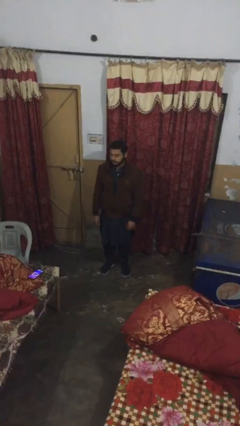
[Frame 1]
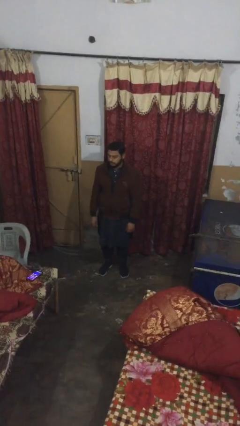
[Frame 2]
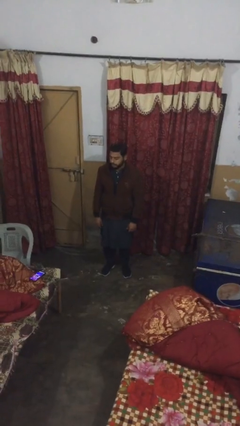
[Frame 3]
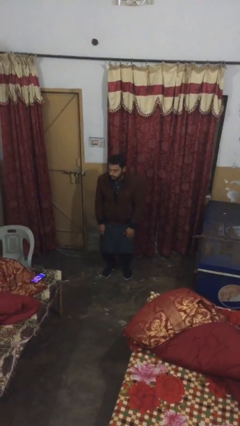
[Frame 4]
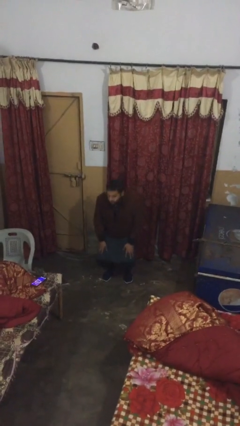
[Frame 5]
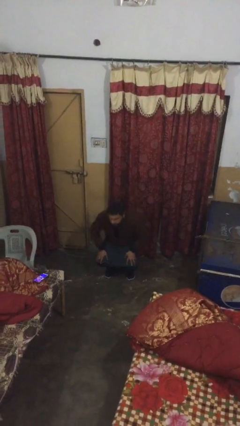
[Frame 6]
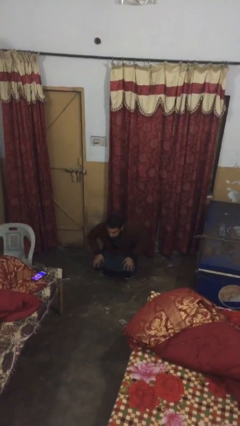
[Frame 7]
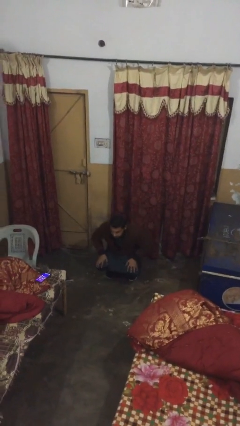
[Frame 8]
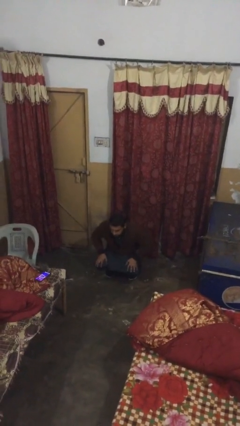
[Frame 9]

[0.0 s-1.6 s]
person sits down

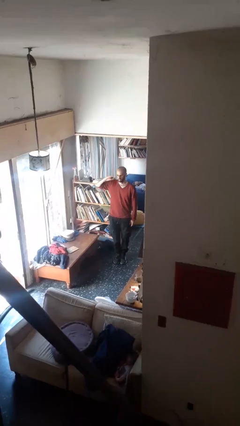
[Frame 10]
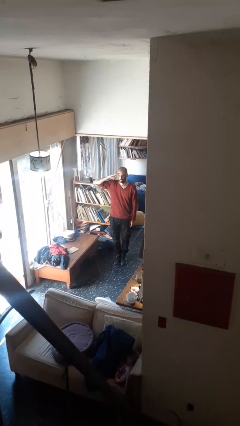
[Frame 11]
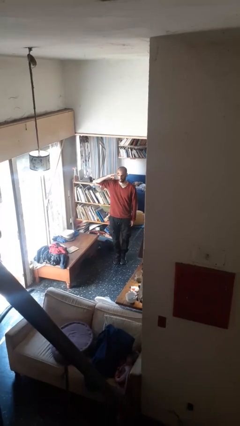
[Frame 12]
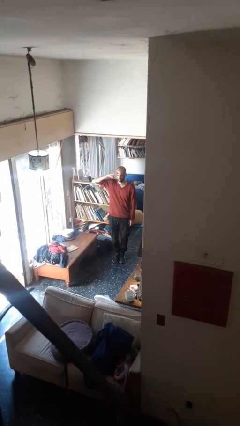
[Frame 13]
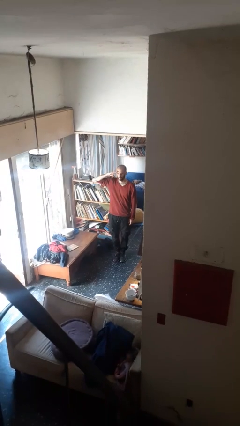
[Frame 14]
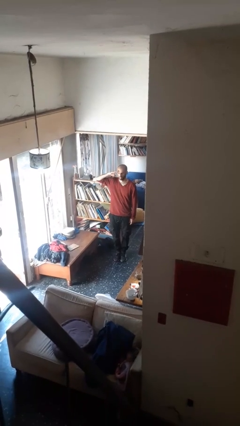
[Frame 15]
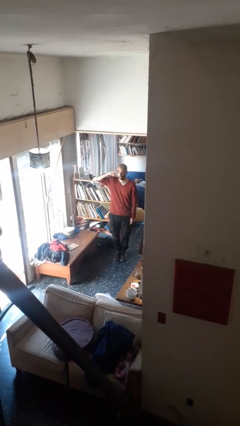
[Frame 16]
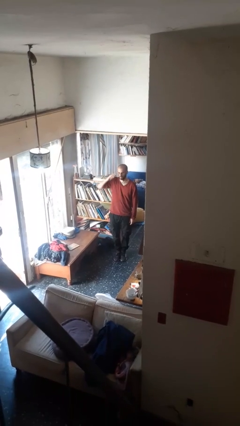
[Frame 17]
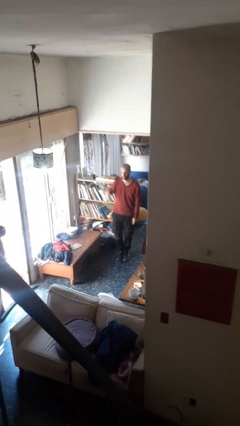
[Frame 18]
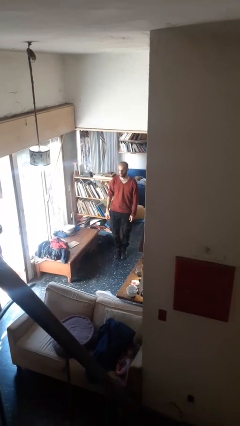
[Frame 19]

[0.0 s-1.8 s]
person salutes

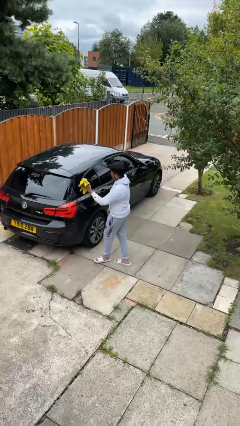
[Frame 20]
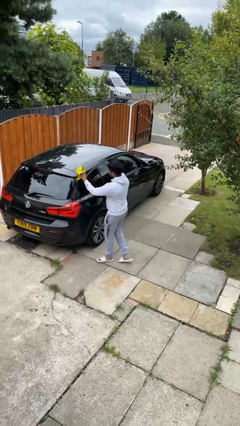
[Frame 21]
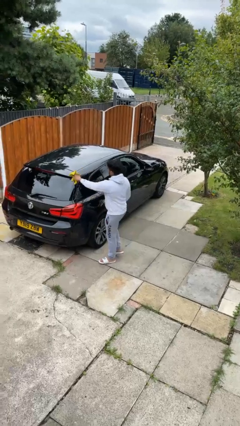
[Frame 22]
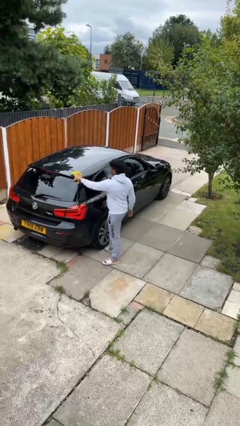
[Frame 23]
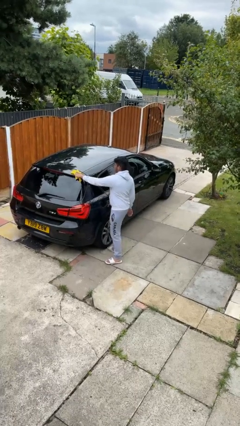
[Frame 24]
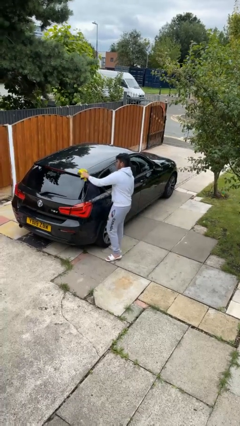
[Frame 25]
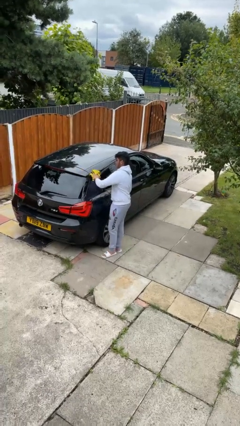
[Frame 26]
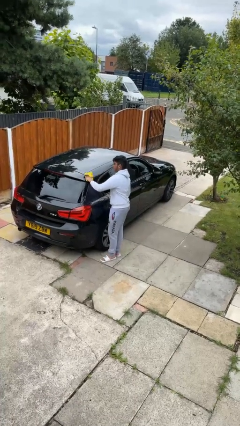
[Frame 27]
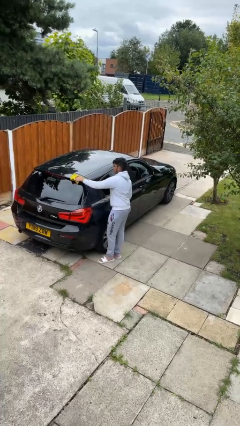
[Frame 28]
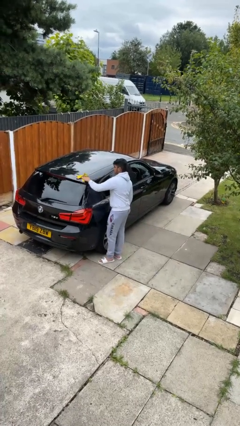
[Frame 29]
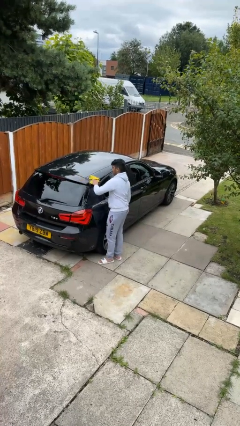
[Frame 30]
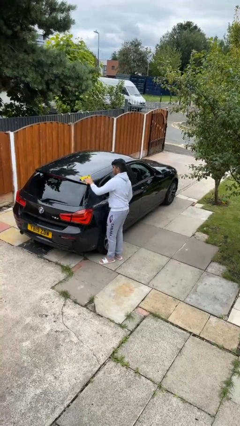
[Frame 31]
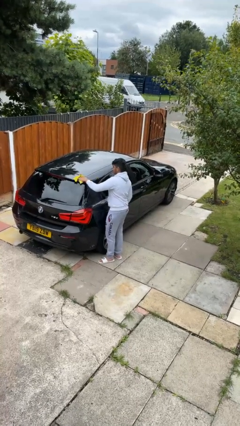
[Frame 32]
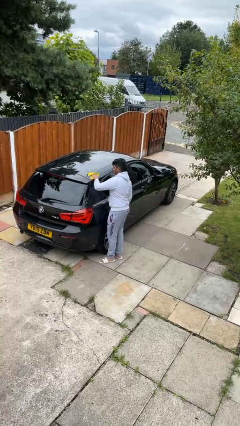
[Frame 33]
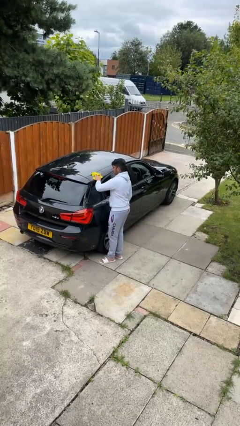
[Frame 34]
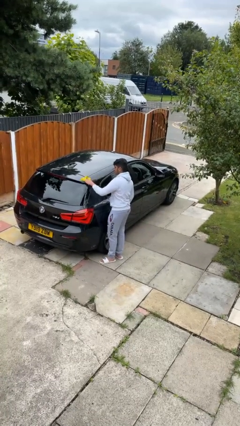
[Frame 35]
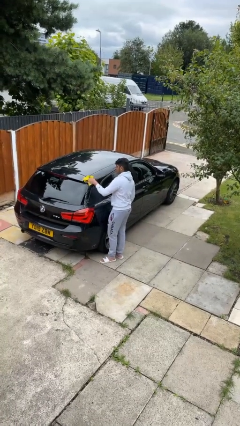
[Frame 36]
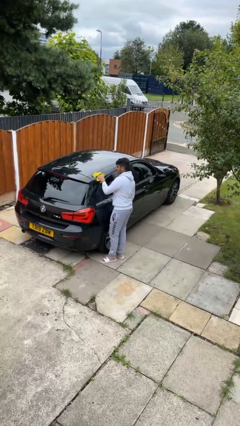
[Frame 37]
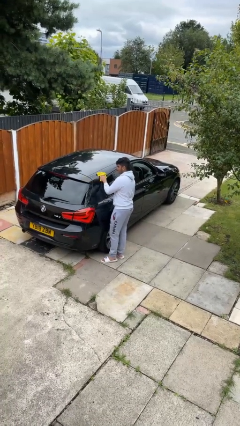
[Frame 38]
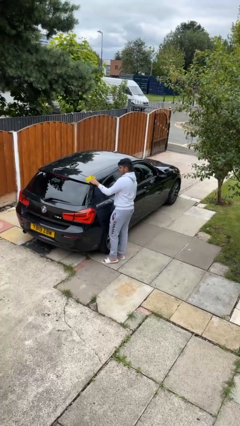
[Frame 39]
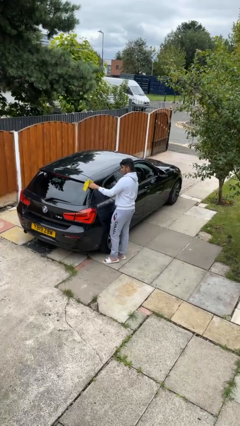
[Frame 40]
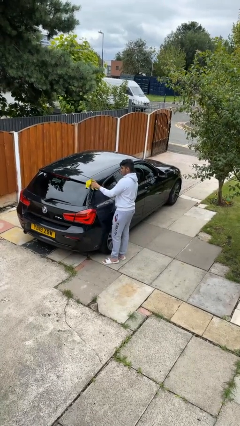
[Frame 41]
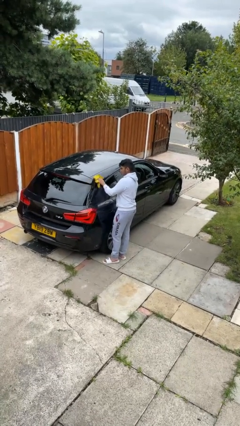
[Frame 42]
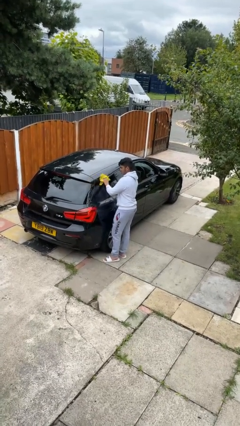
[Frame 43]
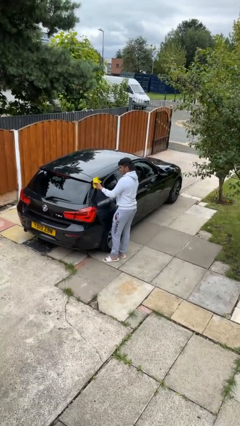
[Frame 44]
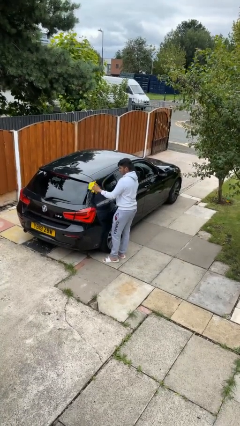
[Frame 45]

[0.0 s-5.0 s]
person polishes car with rag

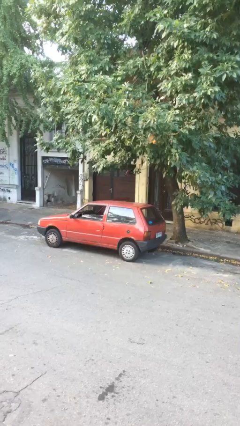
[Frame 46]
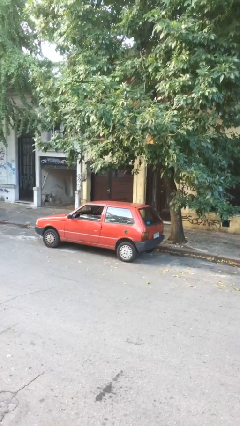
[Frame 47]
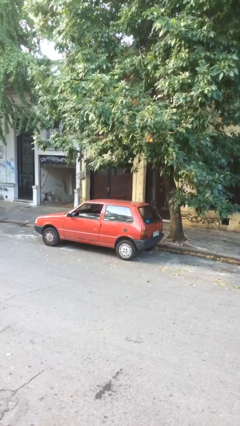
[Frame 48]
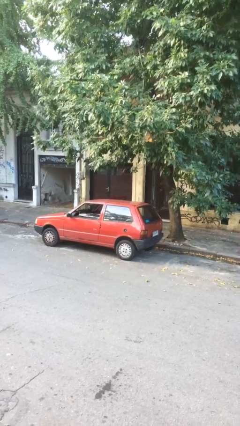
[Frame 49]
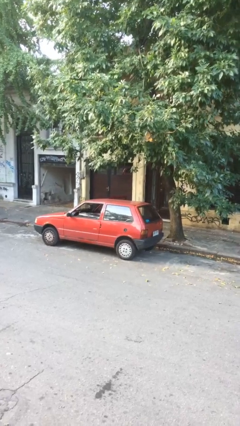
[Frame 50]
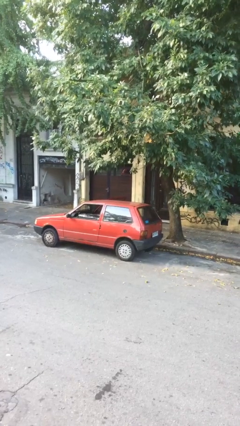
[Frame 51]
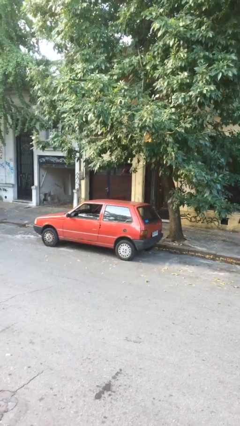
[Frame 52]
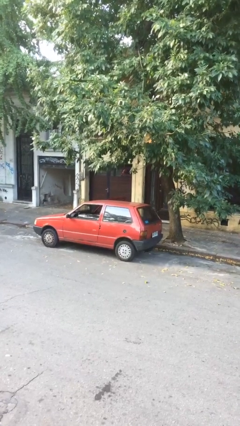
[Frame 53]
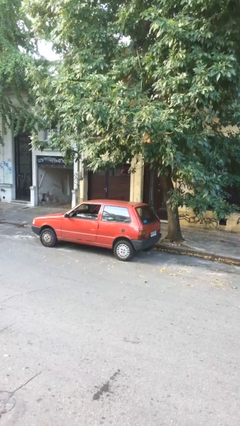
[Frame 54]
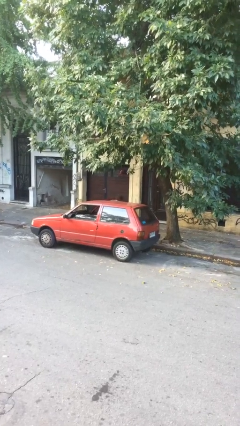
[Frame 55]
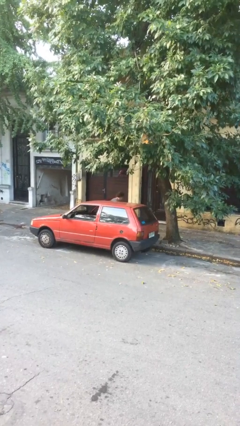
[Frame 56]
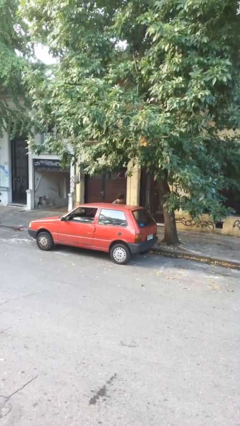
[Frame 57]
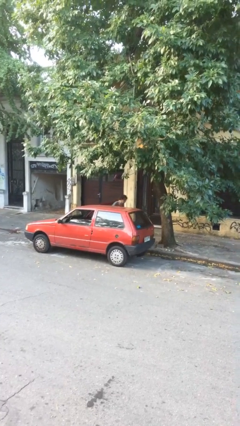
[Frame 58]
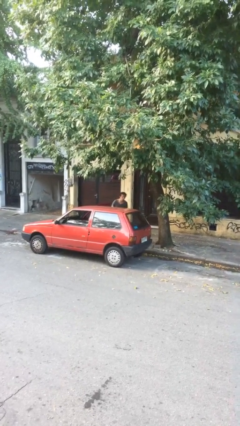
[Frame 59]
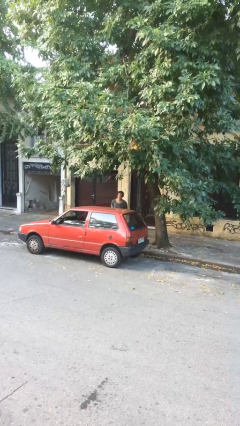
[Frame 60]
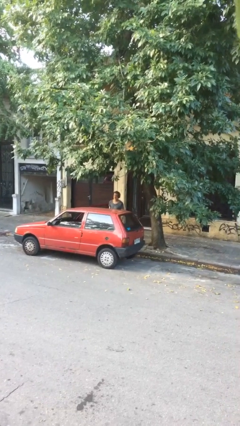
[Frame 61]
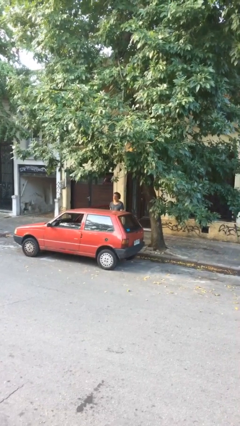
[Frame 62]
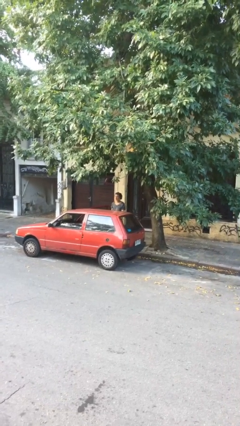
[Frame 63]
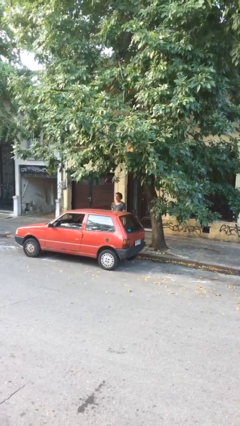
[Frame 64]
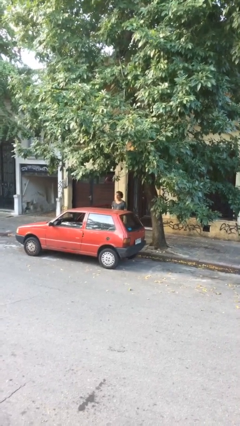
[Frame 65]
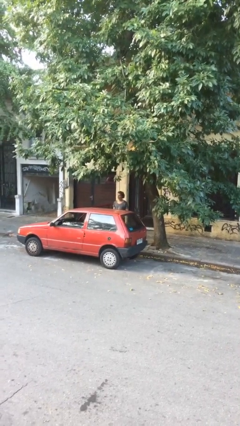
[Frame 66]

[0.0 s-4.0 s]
person exits car

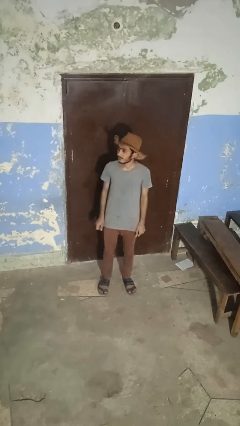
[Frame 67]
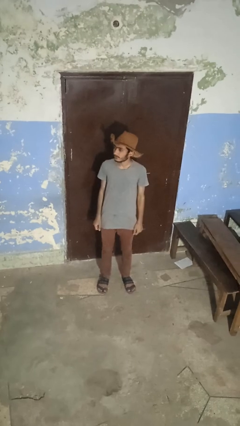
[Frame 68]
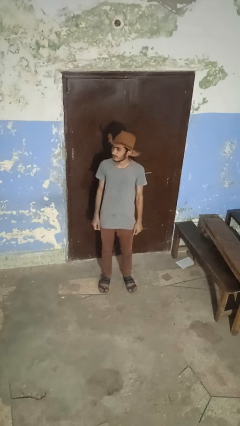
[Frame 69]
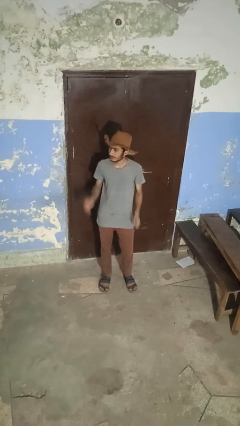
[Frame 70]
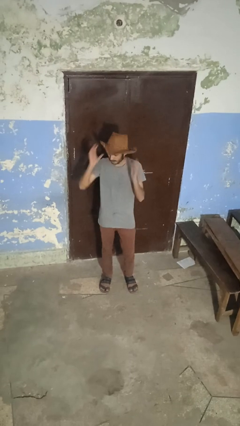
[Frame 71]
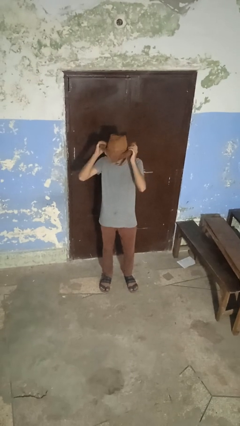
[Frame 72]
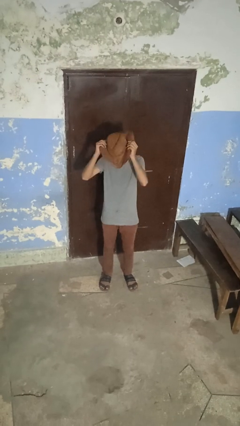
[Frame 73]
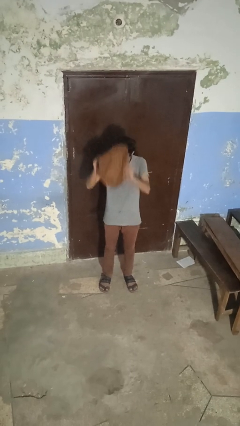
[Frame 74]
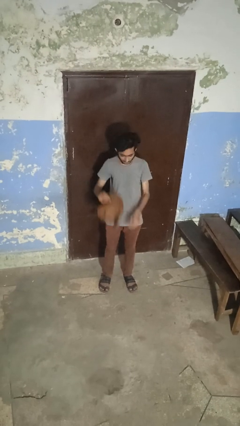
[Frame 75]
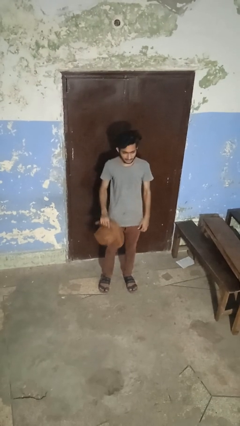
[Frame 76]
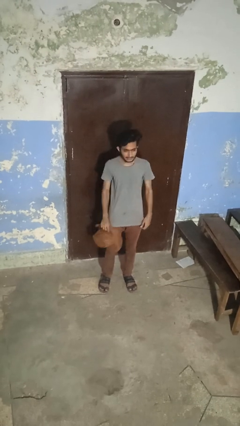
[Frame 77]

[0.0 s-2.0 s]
person takes off hat

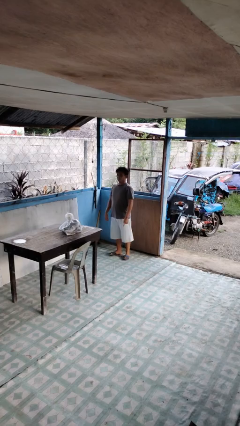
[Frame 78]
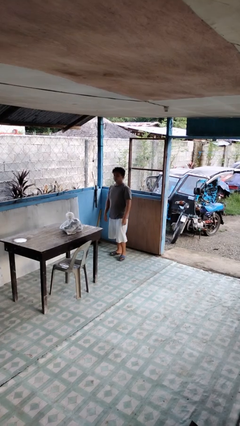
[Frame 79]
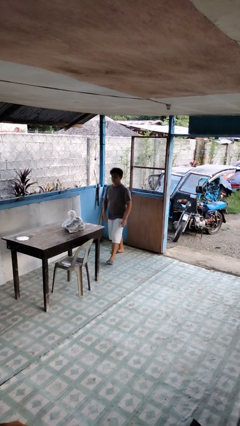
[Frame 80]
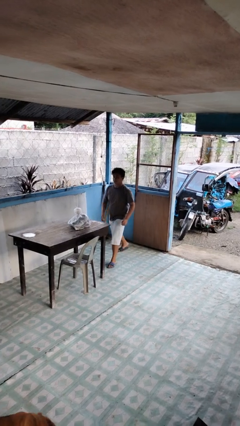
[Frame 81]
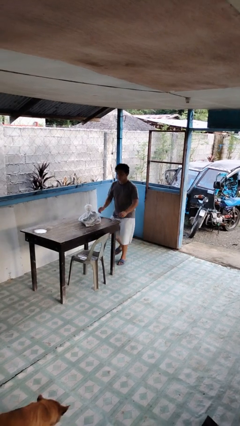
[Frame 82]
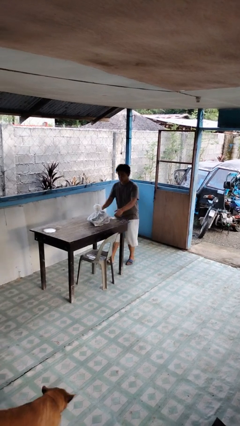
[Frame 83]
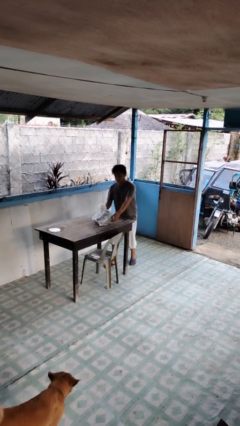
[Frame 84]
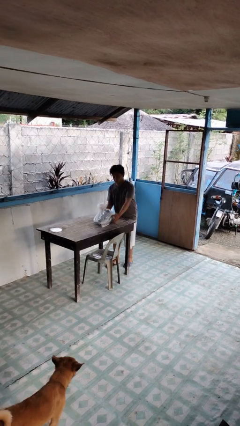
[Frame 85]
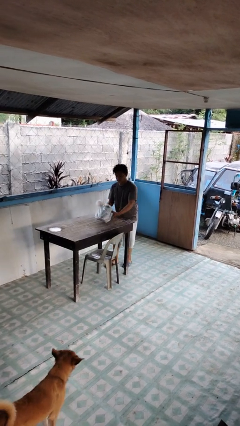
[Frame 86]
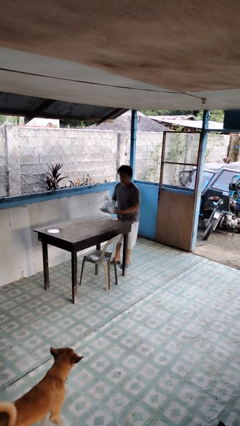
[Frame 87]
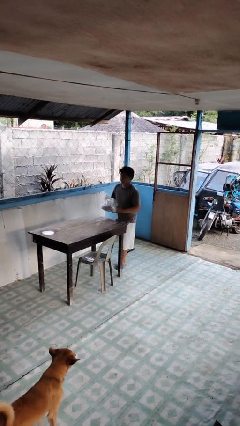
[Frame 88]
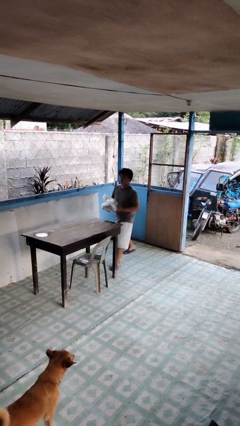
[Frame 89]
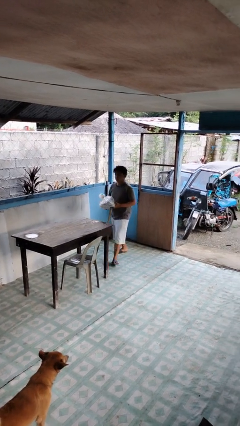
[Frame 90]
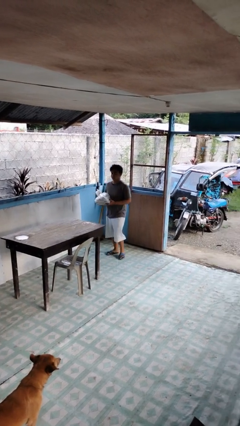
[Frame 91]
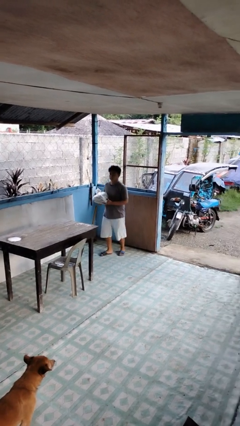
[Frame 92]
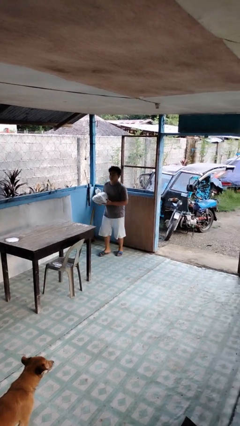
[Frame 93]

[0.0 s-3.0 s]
person picks up object from table
